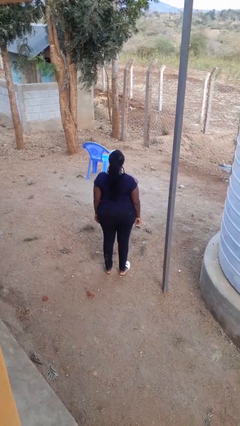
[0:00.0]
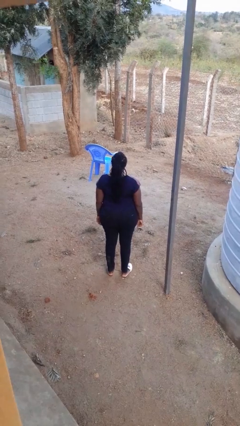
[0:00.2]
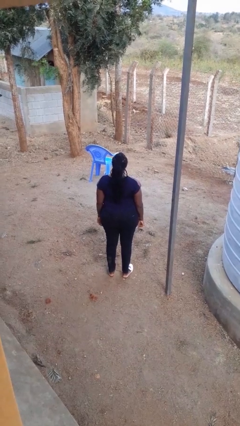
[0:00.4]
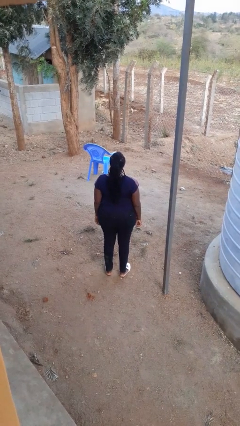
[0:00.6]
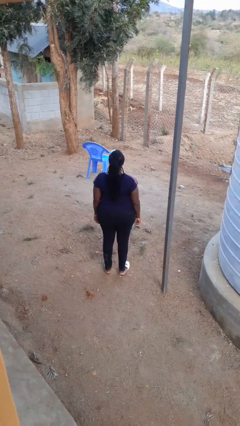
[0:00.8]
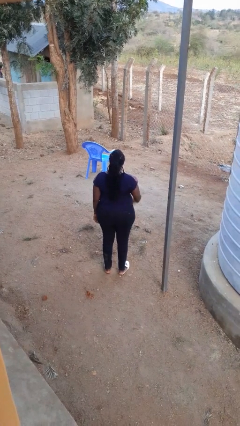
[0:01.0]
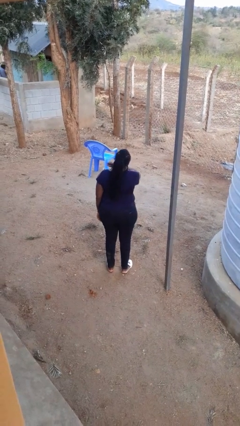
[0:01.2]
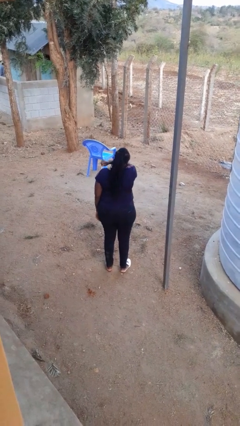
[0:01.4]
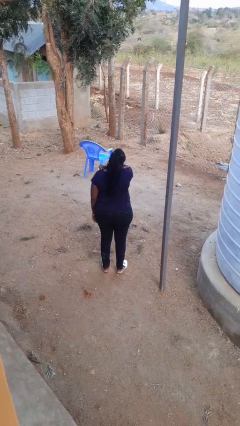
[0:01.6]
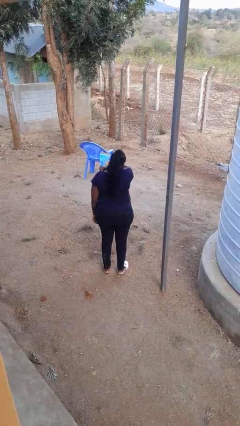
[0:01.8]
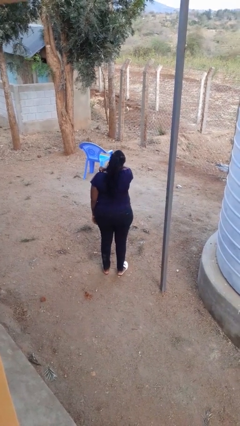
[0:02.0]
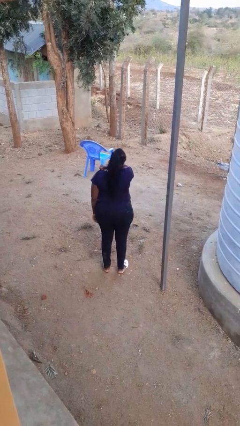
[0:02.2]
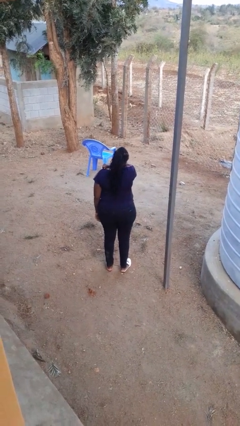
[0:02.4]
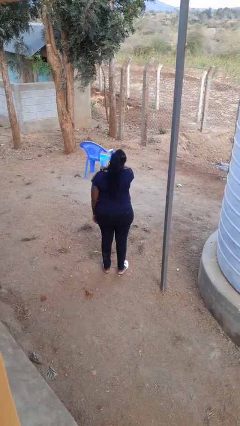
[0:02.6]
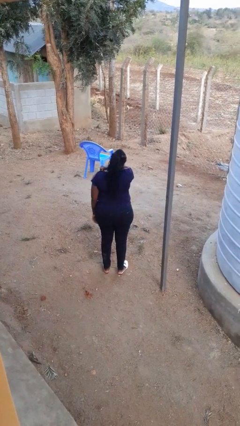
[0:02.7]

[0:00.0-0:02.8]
person sneezes into arm

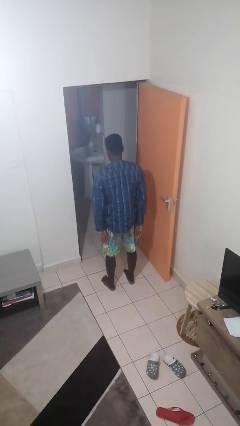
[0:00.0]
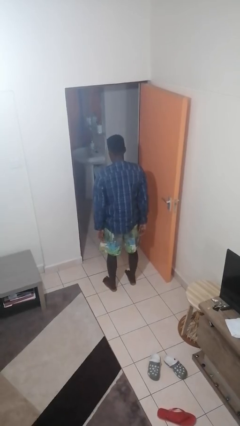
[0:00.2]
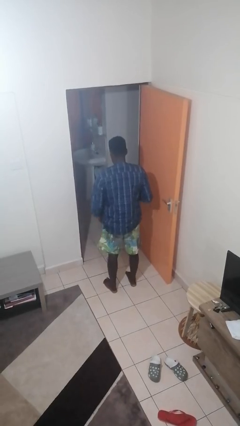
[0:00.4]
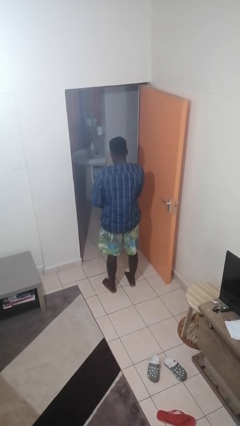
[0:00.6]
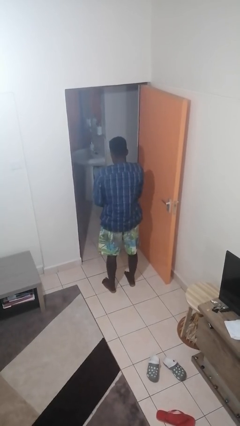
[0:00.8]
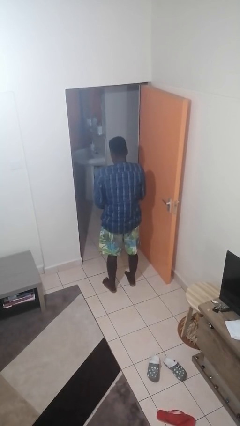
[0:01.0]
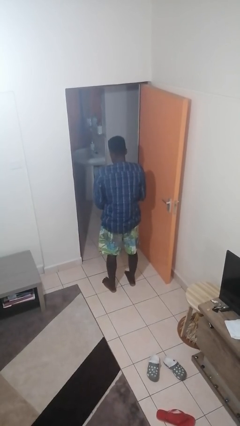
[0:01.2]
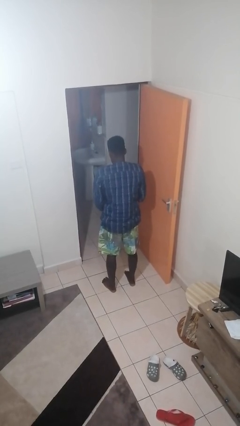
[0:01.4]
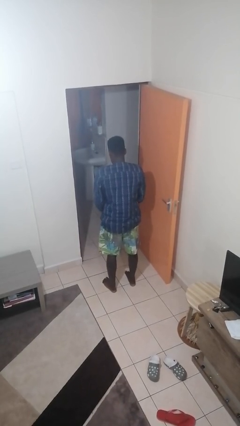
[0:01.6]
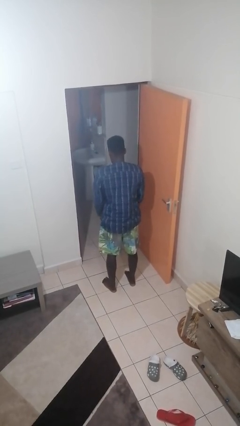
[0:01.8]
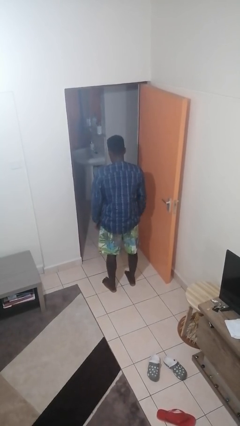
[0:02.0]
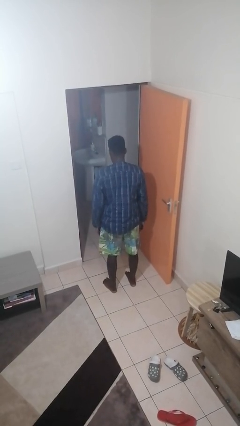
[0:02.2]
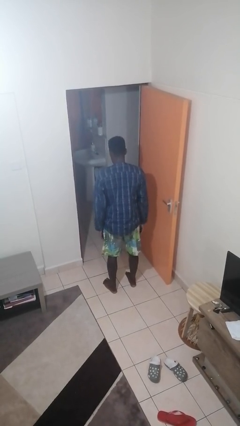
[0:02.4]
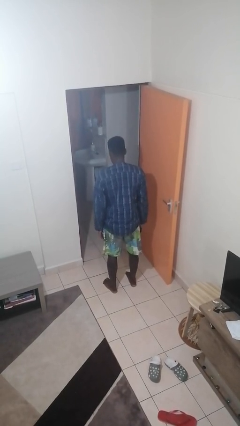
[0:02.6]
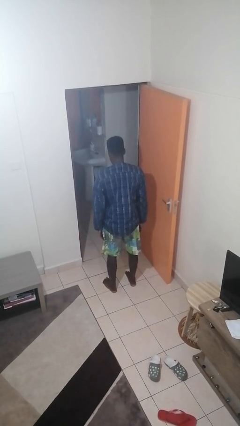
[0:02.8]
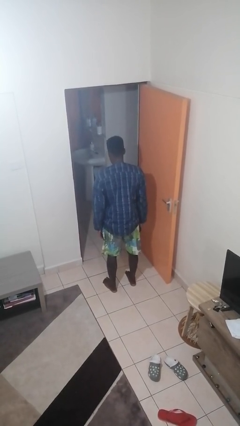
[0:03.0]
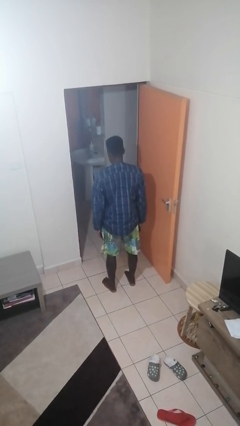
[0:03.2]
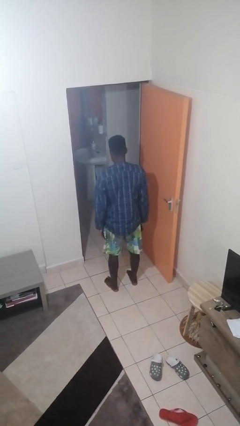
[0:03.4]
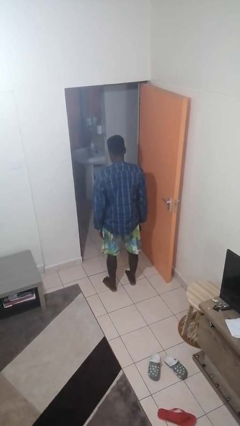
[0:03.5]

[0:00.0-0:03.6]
person unzips jacket

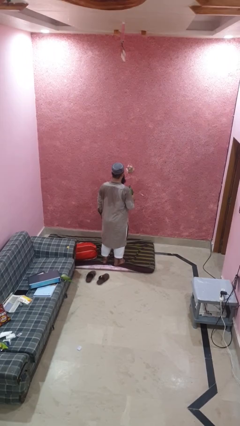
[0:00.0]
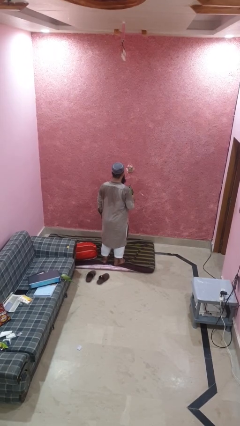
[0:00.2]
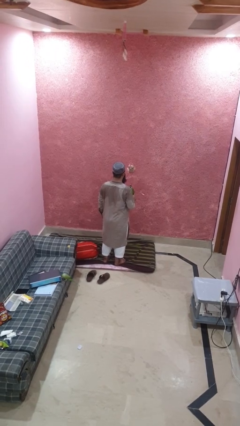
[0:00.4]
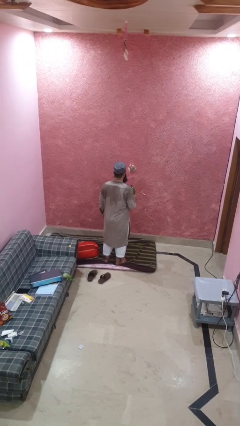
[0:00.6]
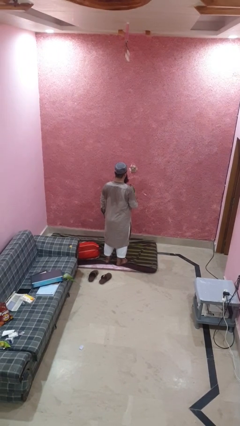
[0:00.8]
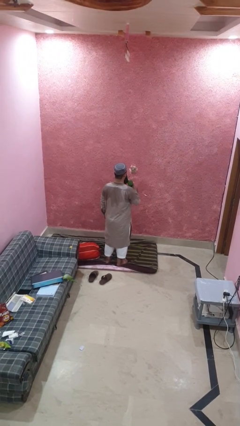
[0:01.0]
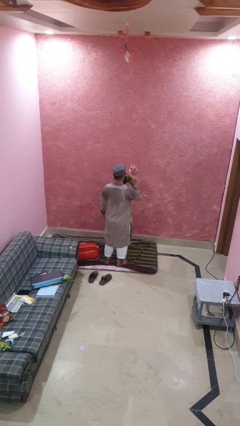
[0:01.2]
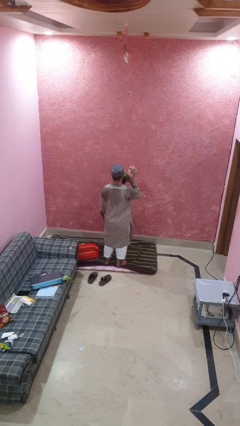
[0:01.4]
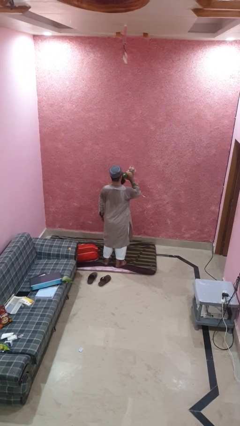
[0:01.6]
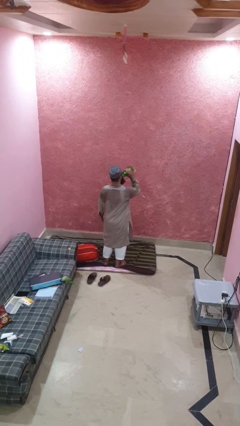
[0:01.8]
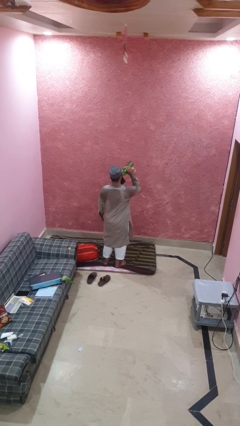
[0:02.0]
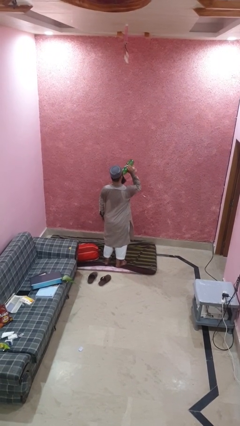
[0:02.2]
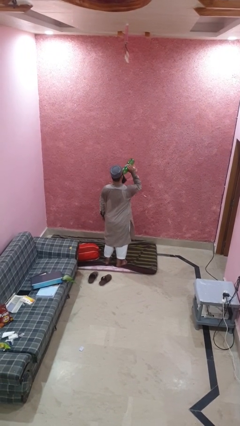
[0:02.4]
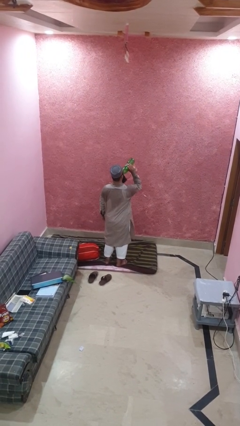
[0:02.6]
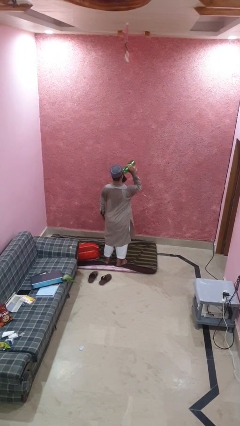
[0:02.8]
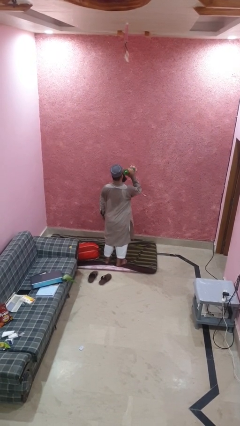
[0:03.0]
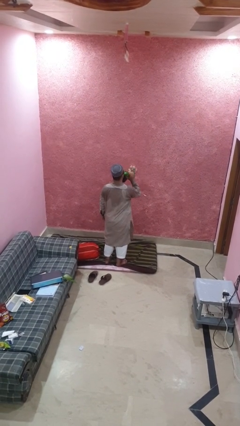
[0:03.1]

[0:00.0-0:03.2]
person drinks from bottle

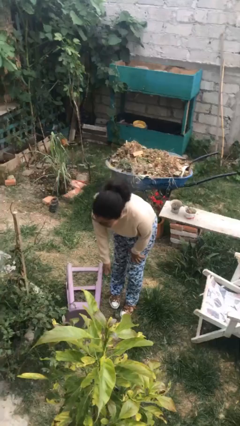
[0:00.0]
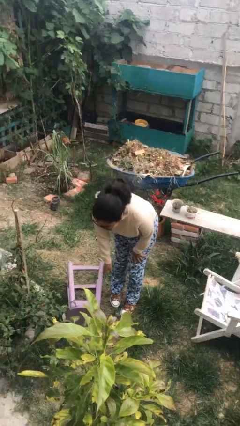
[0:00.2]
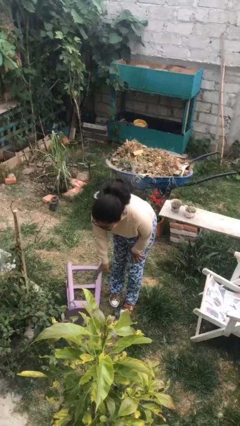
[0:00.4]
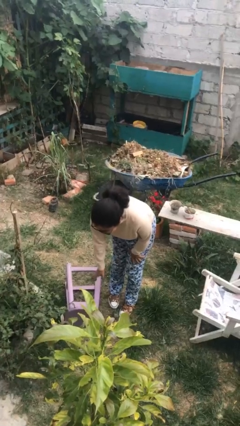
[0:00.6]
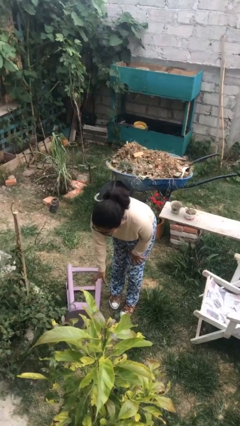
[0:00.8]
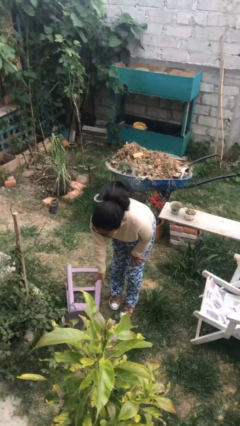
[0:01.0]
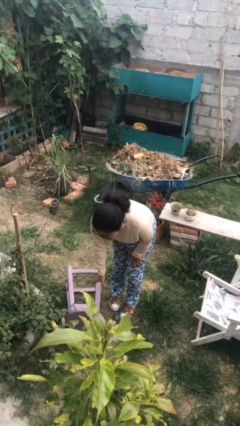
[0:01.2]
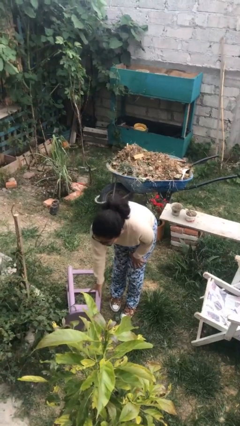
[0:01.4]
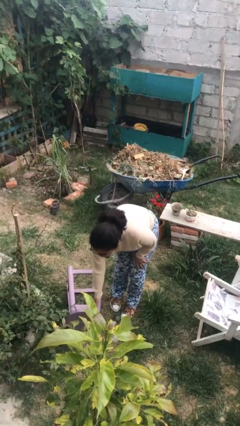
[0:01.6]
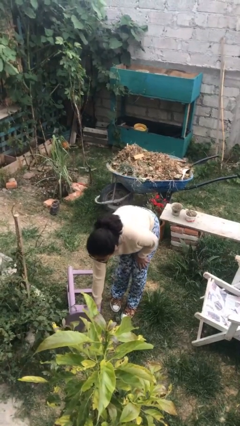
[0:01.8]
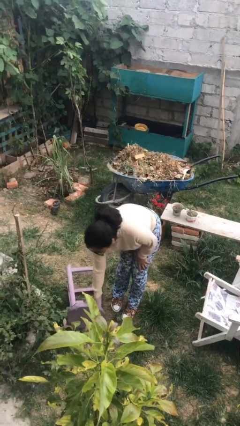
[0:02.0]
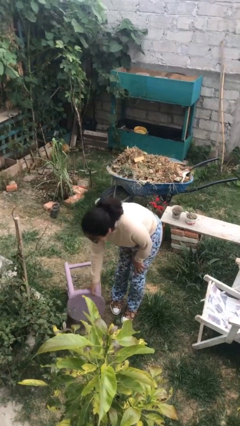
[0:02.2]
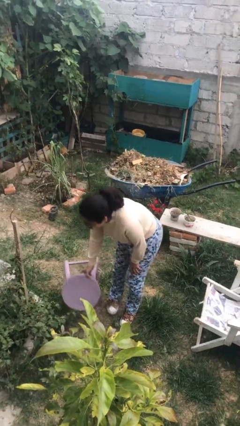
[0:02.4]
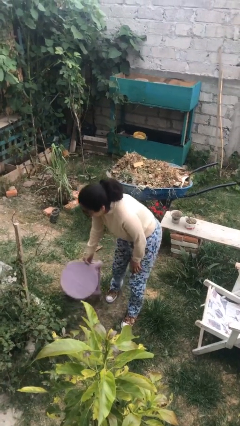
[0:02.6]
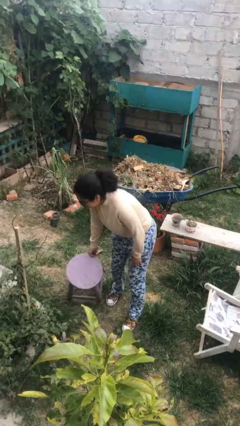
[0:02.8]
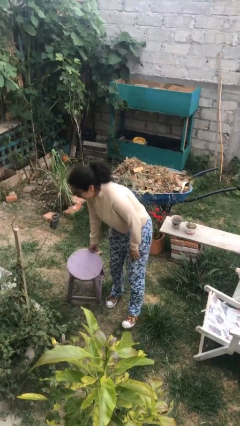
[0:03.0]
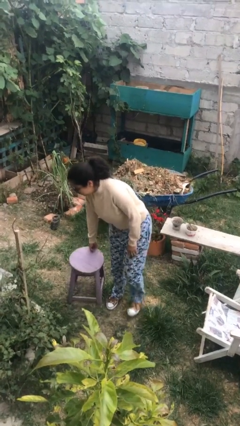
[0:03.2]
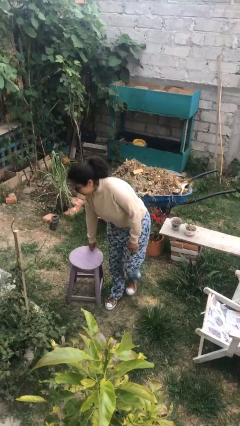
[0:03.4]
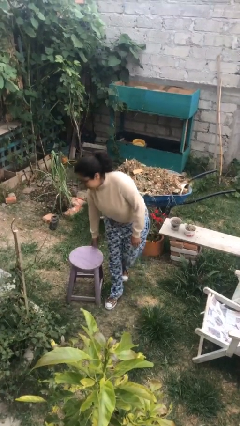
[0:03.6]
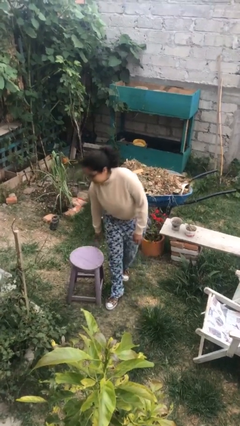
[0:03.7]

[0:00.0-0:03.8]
person sets upright furniture

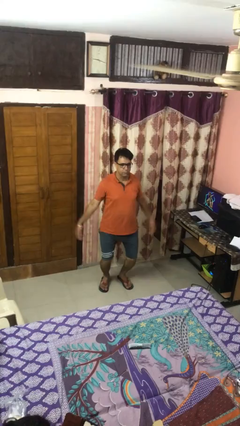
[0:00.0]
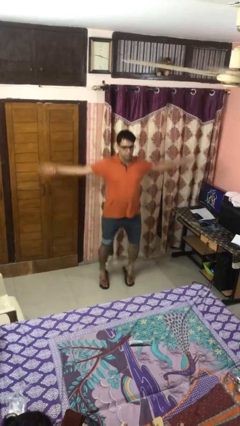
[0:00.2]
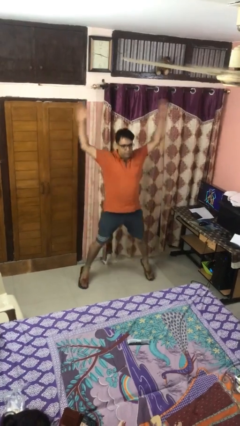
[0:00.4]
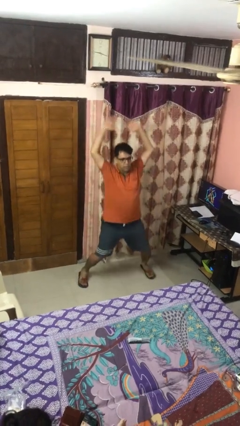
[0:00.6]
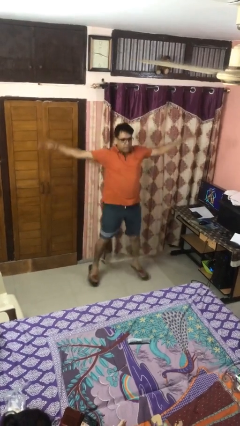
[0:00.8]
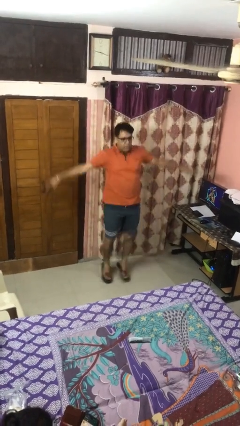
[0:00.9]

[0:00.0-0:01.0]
person exercises with jumping jacks

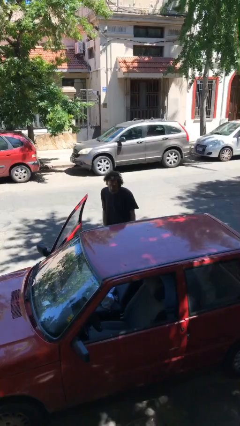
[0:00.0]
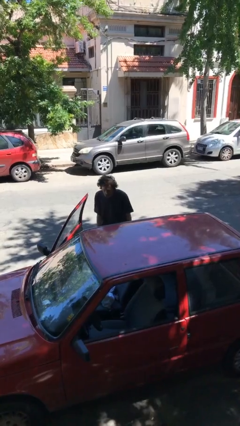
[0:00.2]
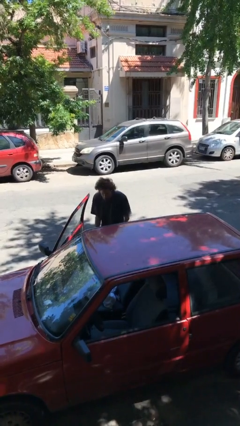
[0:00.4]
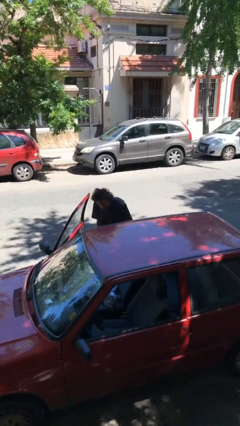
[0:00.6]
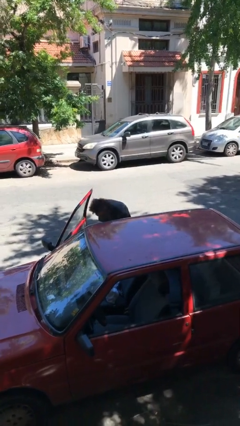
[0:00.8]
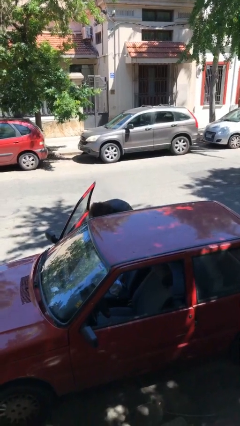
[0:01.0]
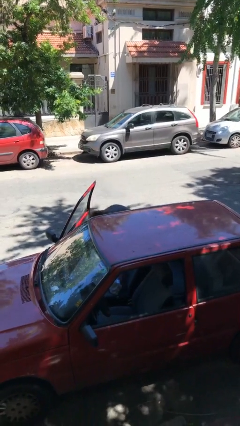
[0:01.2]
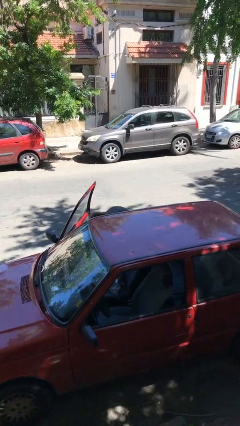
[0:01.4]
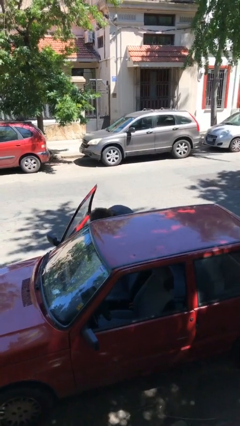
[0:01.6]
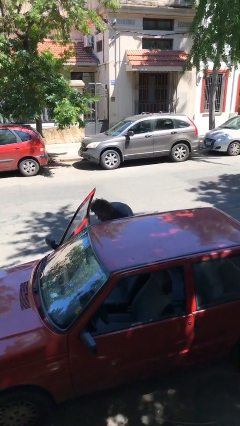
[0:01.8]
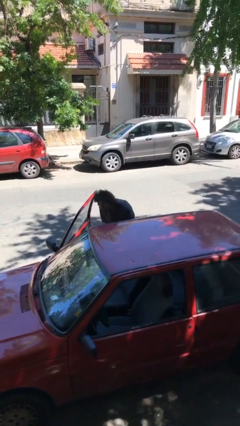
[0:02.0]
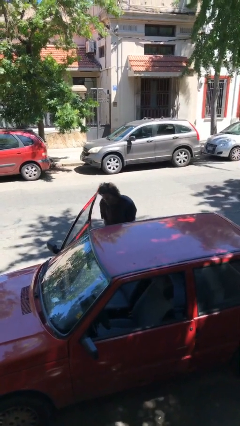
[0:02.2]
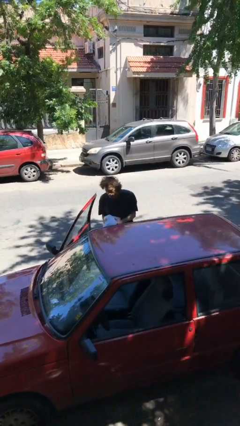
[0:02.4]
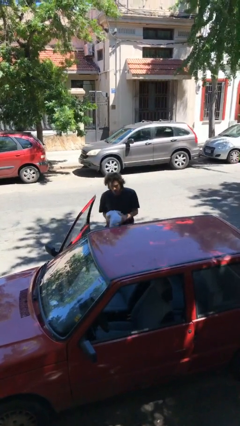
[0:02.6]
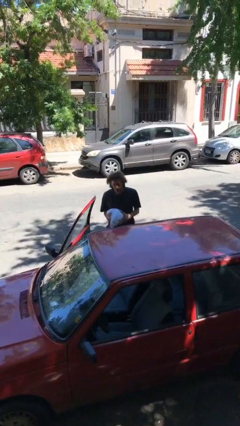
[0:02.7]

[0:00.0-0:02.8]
person unloads car
